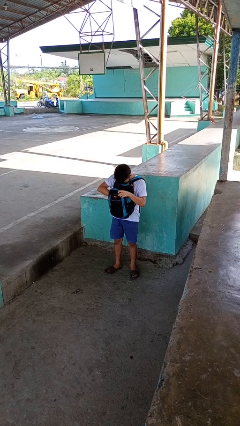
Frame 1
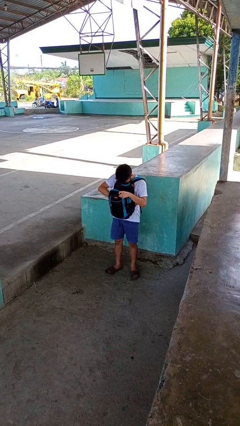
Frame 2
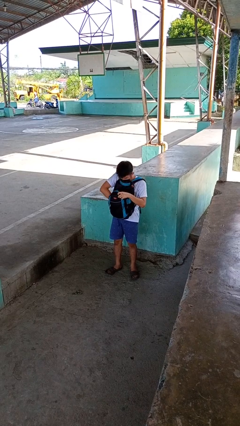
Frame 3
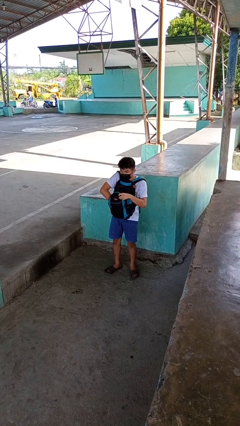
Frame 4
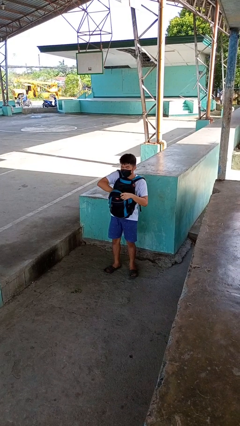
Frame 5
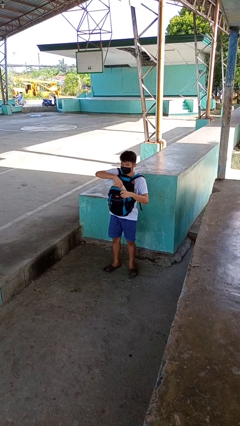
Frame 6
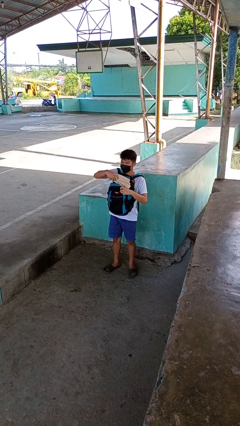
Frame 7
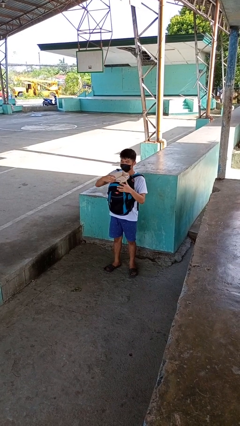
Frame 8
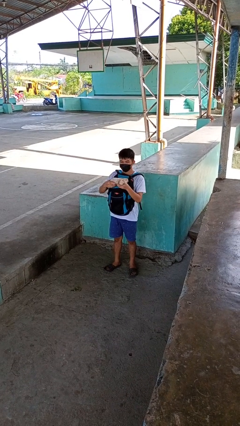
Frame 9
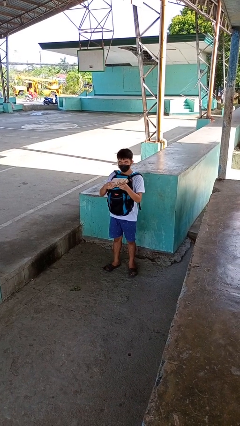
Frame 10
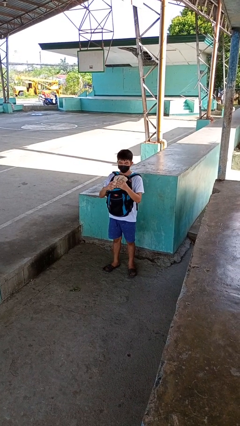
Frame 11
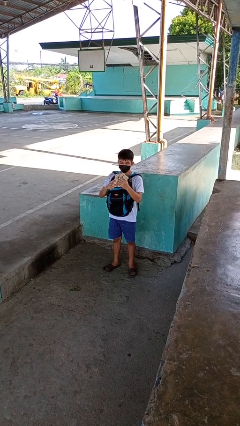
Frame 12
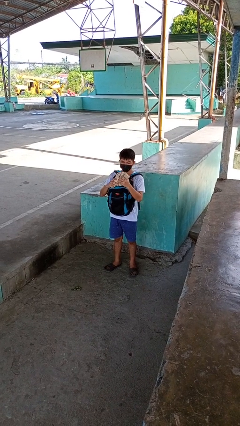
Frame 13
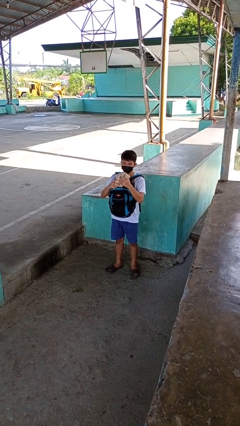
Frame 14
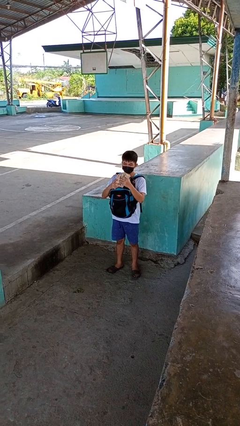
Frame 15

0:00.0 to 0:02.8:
person takes object from backpack

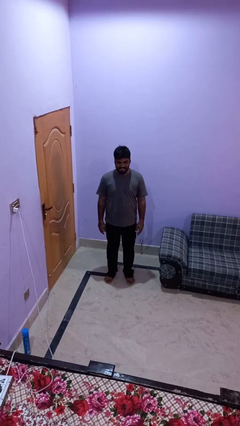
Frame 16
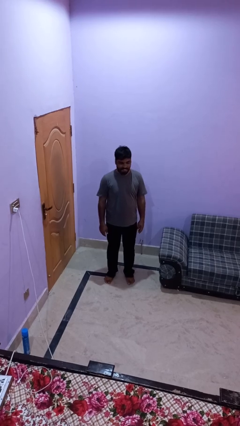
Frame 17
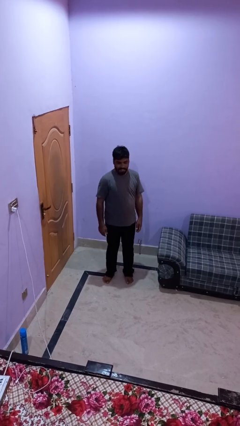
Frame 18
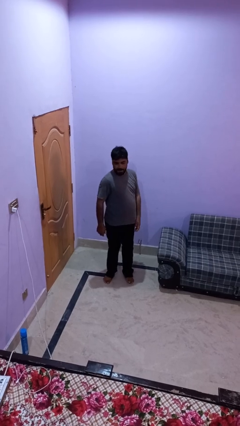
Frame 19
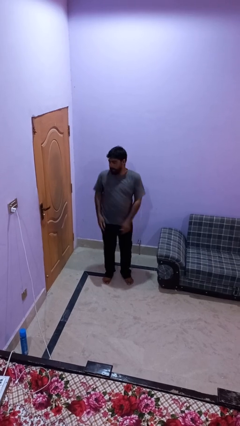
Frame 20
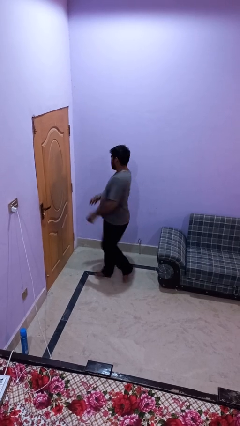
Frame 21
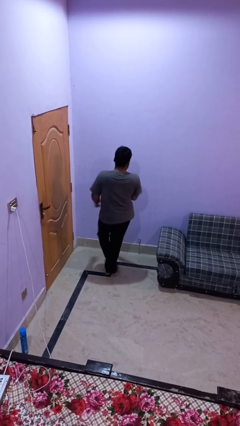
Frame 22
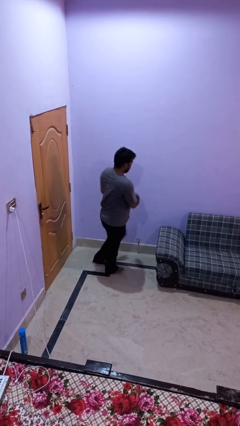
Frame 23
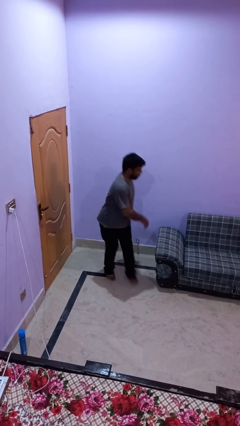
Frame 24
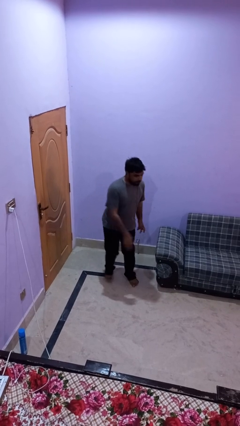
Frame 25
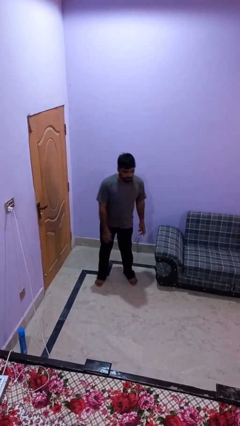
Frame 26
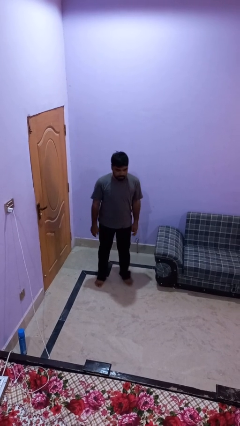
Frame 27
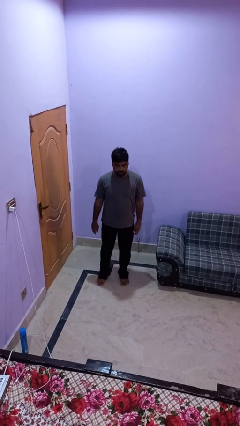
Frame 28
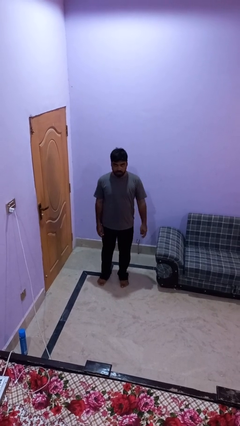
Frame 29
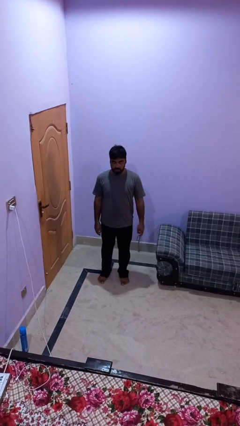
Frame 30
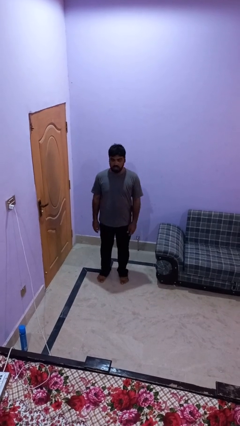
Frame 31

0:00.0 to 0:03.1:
person twirls

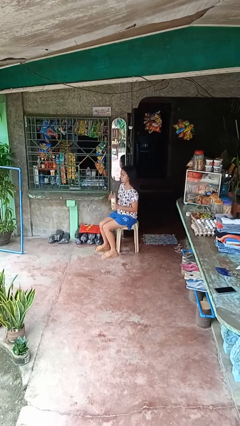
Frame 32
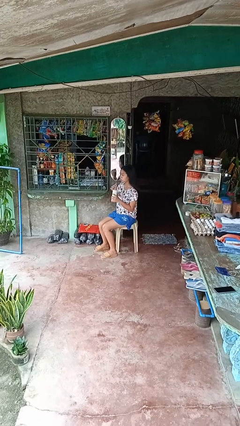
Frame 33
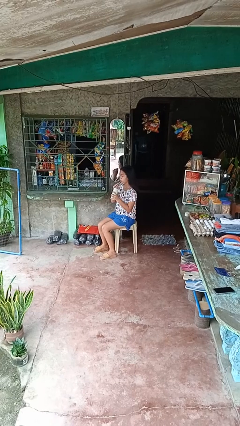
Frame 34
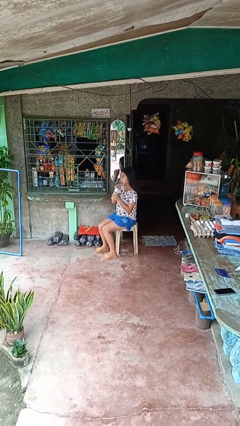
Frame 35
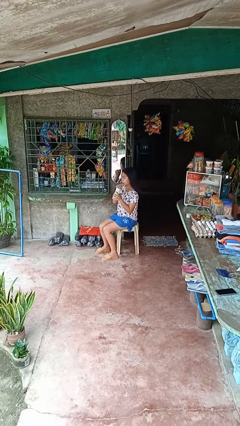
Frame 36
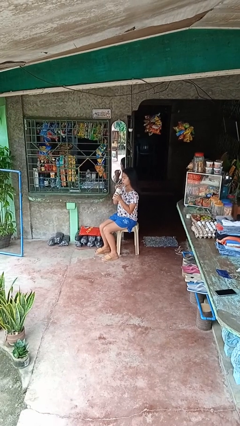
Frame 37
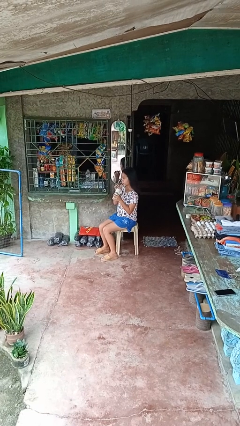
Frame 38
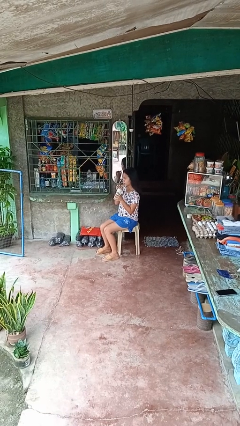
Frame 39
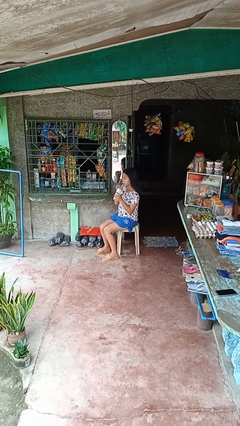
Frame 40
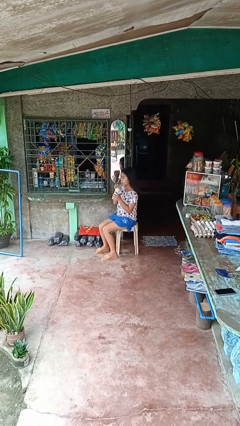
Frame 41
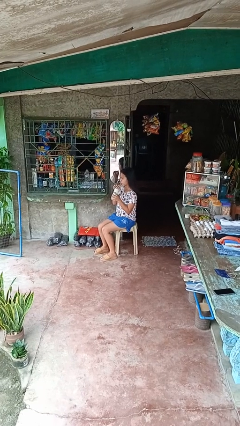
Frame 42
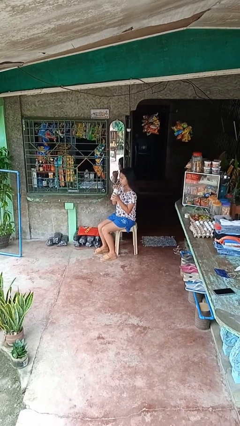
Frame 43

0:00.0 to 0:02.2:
person drinks from straw

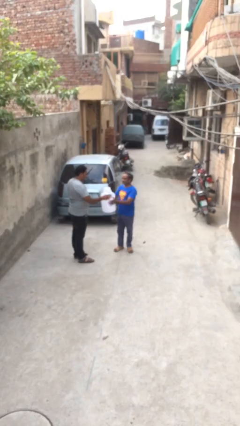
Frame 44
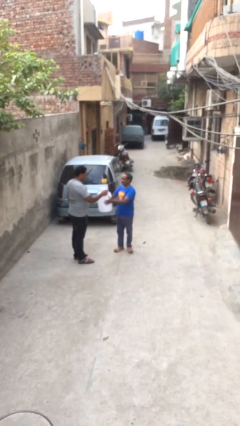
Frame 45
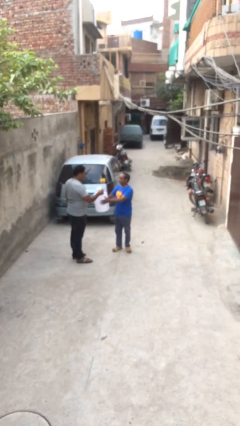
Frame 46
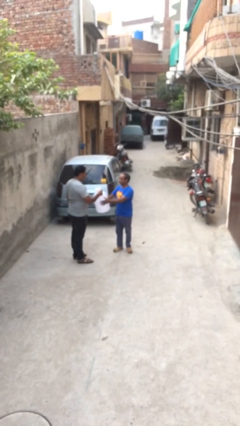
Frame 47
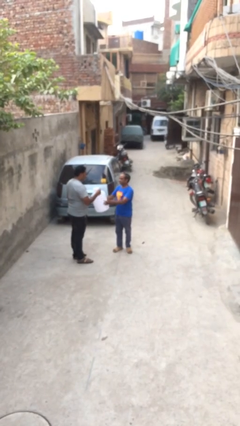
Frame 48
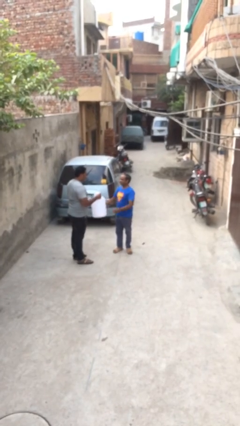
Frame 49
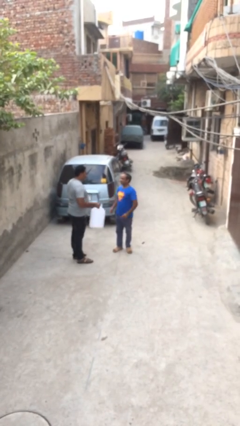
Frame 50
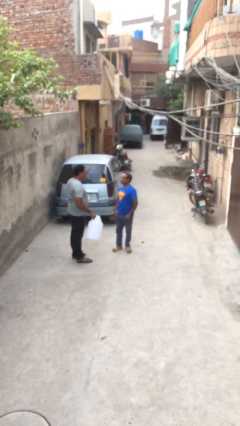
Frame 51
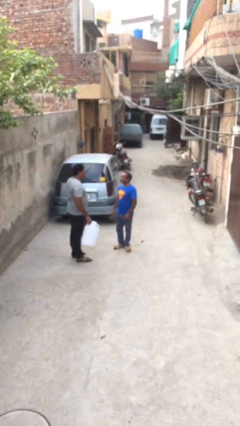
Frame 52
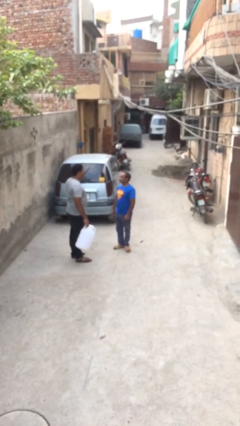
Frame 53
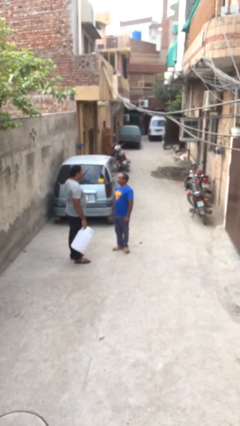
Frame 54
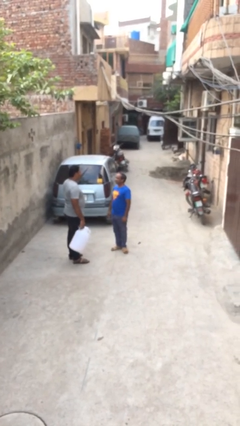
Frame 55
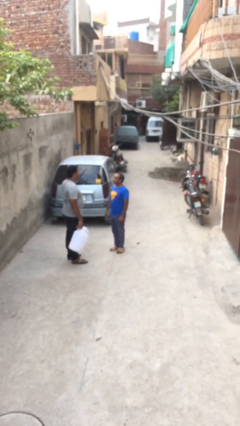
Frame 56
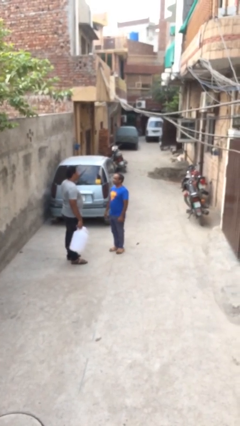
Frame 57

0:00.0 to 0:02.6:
person transfers object to person

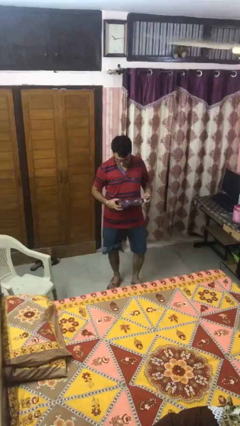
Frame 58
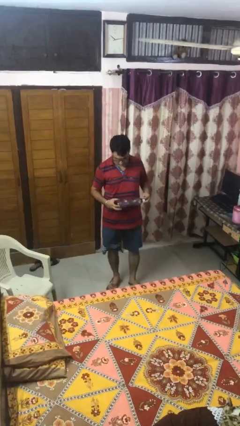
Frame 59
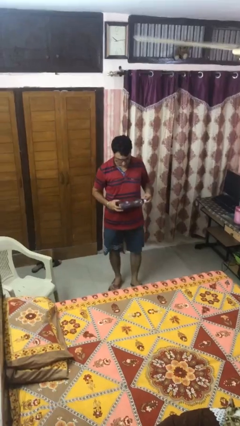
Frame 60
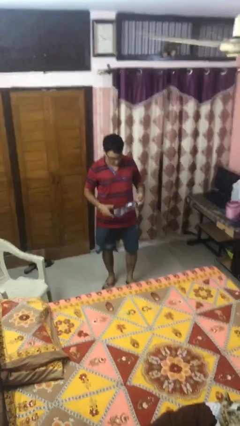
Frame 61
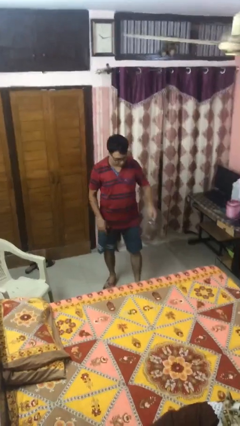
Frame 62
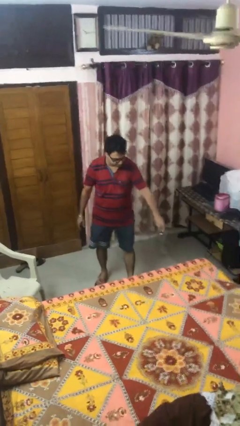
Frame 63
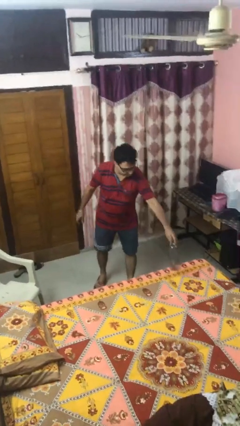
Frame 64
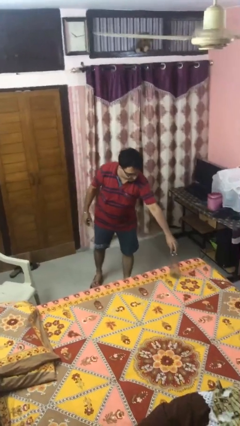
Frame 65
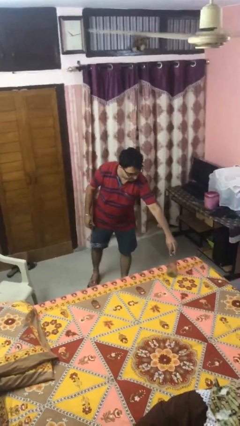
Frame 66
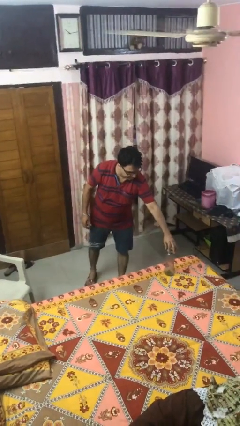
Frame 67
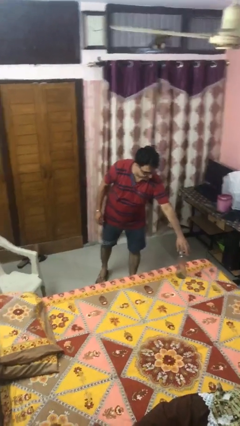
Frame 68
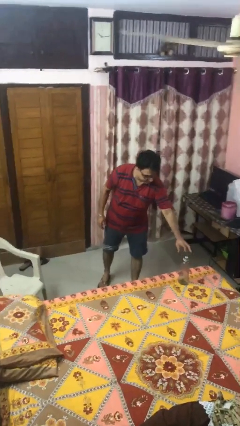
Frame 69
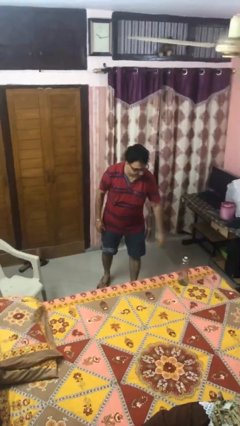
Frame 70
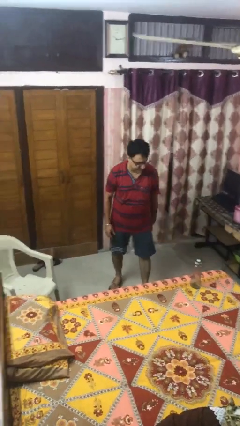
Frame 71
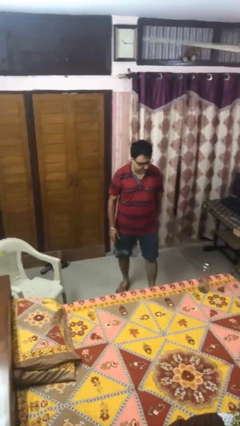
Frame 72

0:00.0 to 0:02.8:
person puts down object on bed

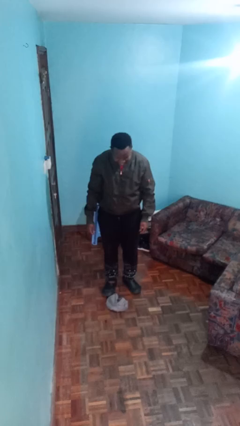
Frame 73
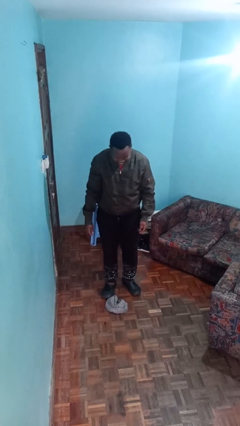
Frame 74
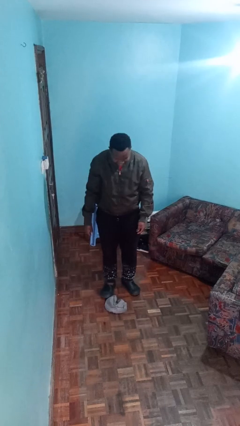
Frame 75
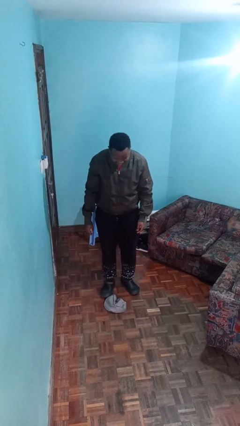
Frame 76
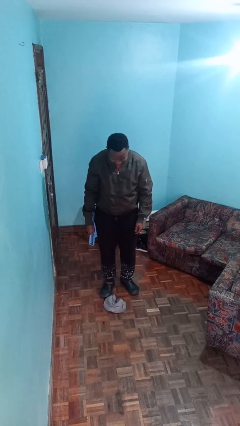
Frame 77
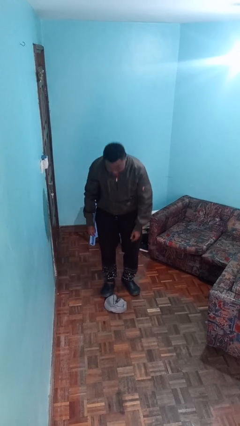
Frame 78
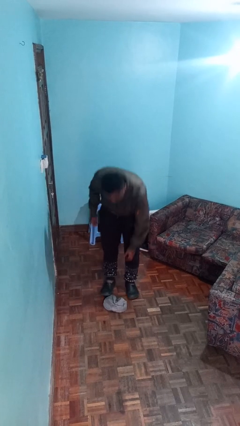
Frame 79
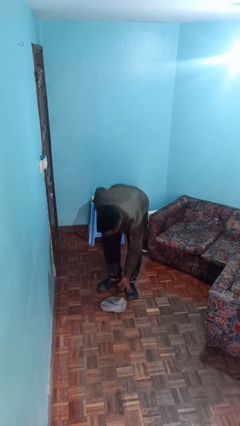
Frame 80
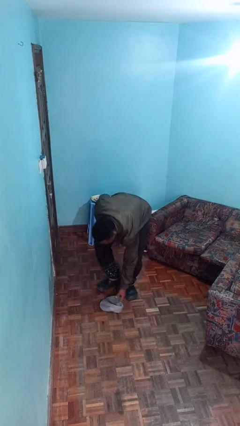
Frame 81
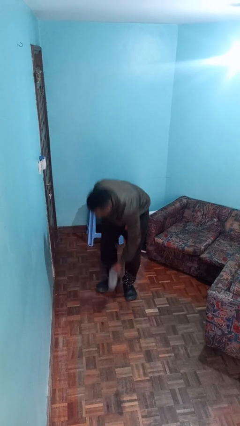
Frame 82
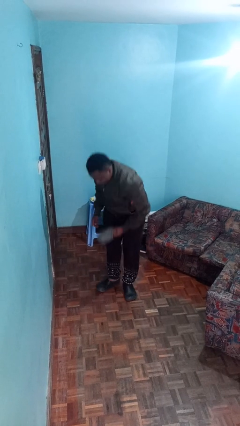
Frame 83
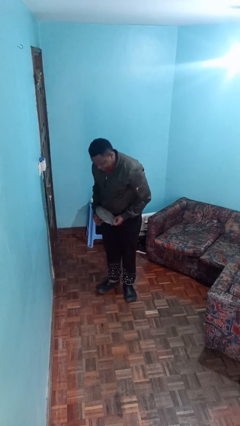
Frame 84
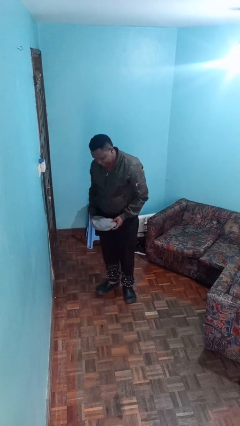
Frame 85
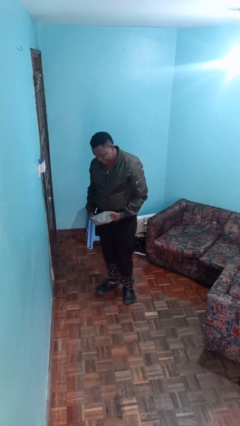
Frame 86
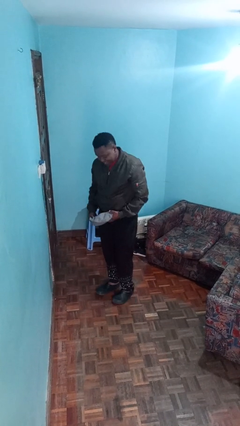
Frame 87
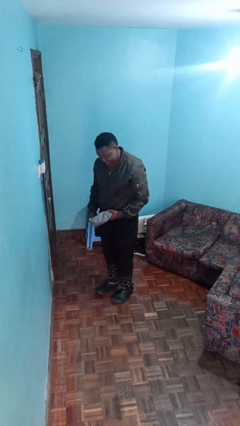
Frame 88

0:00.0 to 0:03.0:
person picks up object from floor

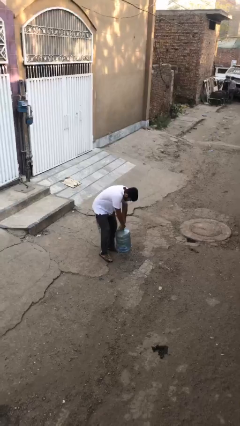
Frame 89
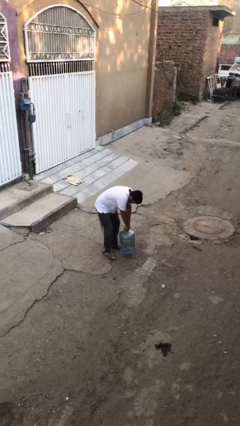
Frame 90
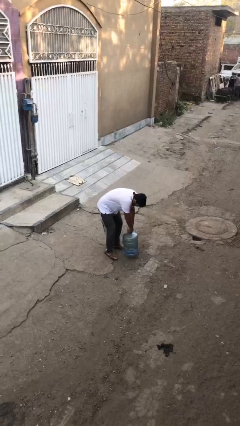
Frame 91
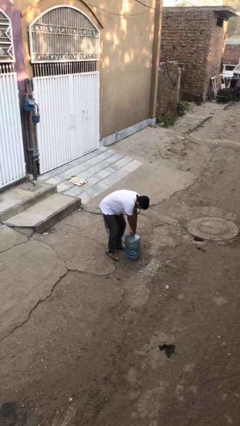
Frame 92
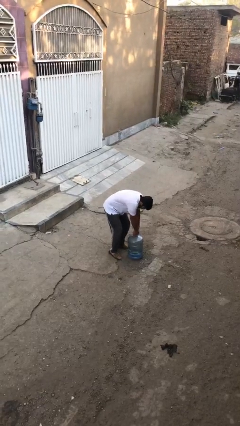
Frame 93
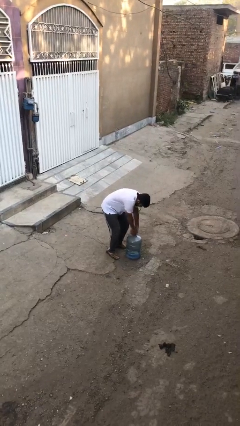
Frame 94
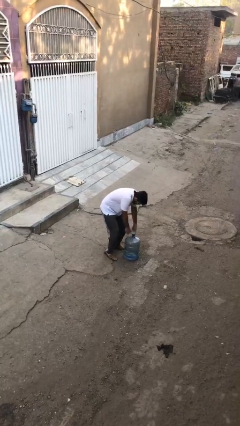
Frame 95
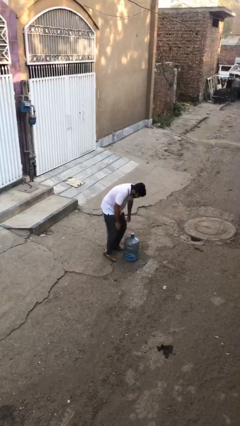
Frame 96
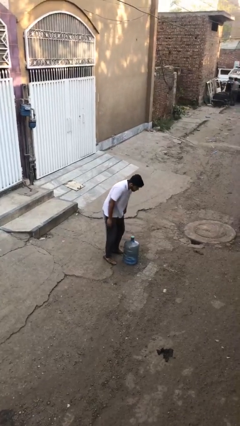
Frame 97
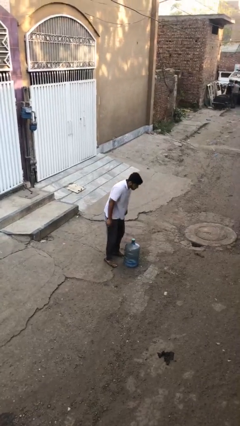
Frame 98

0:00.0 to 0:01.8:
person puts down object on floor
